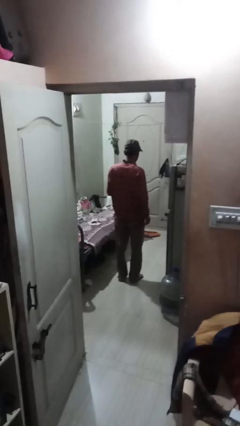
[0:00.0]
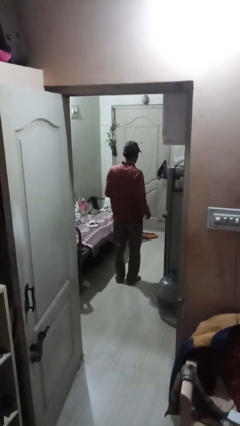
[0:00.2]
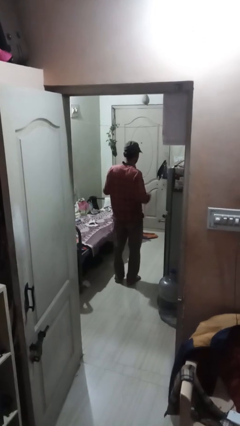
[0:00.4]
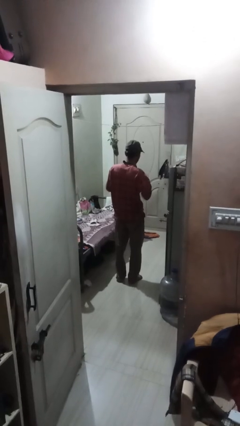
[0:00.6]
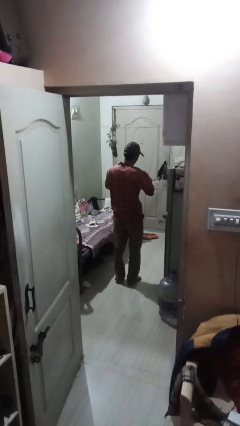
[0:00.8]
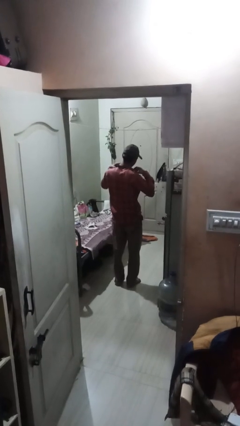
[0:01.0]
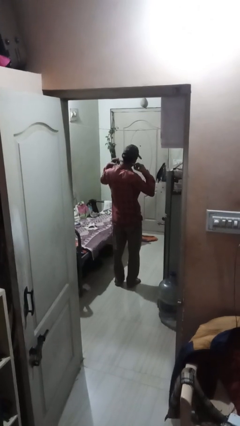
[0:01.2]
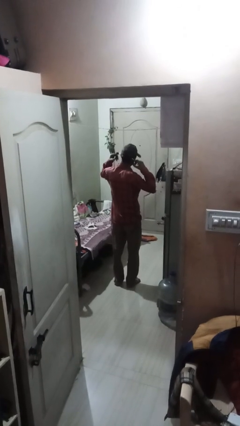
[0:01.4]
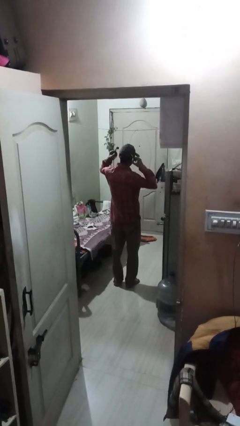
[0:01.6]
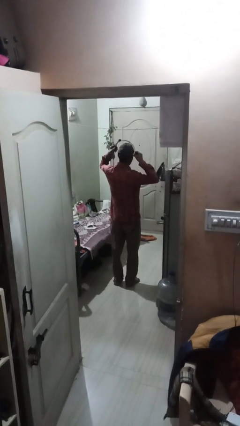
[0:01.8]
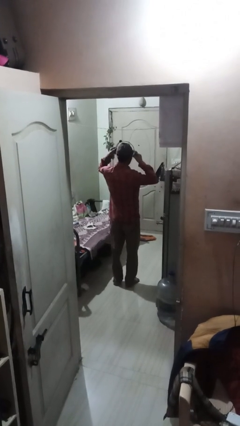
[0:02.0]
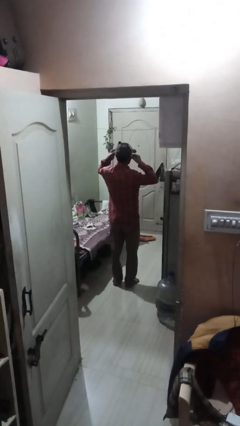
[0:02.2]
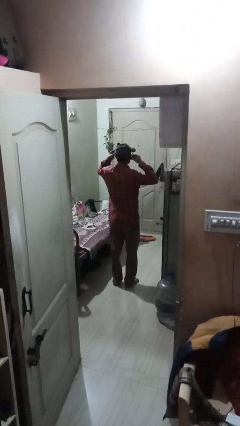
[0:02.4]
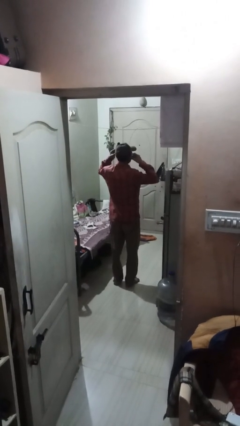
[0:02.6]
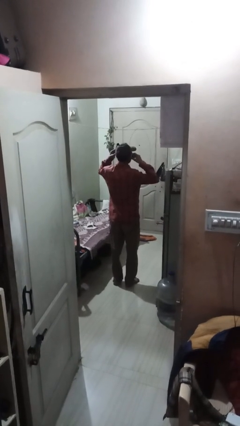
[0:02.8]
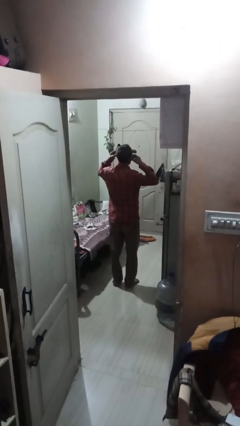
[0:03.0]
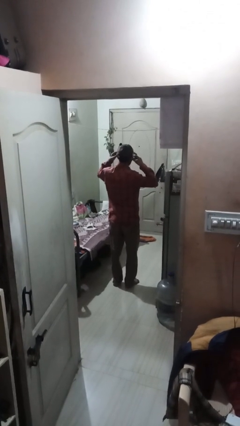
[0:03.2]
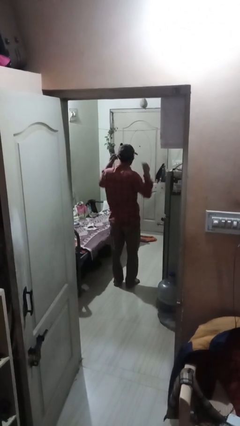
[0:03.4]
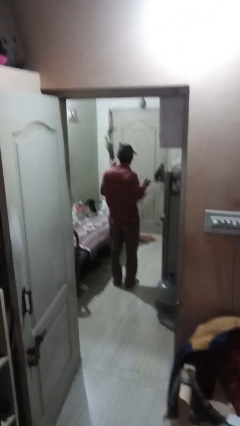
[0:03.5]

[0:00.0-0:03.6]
person puts on headphones

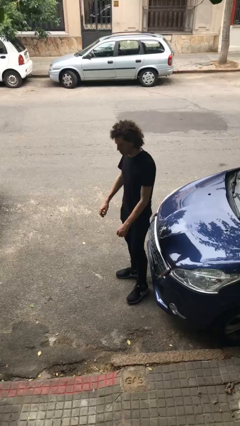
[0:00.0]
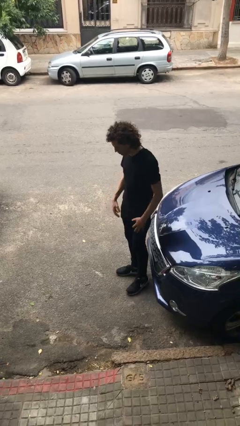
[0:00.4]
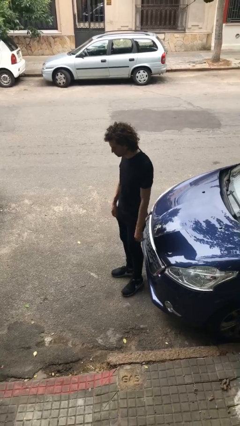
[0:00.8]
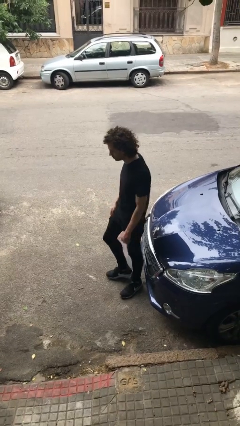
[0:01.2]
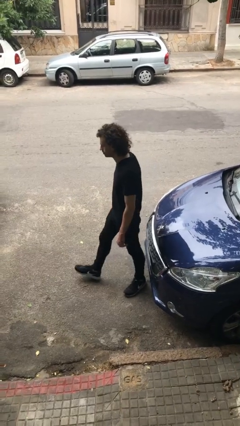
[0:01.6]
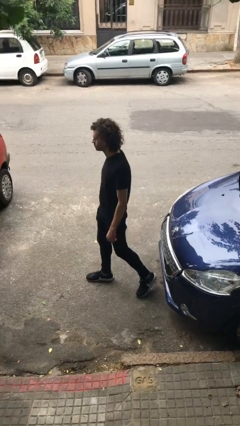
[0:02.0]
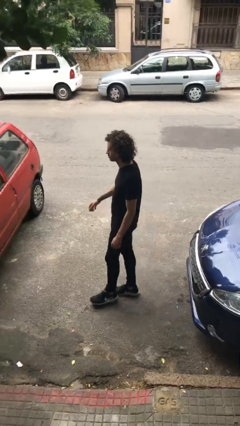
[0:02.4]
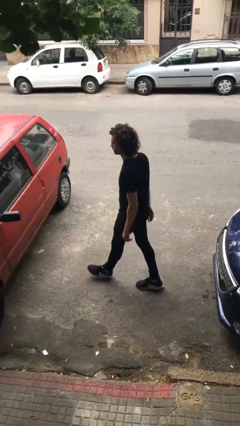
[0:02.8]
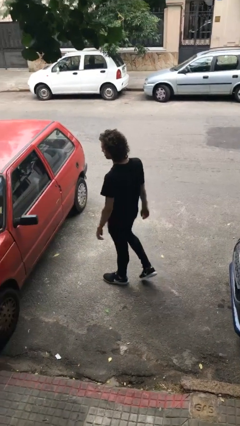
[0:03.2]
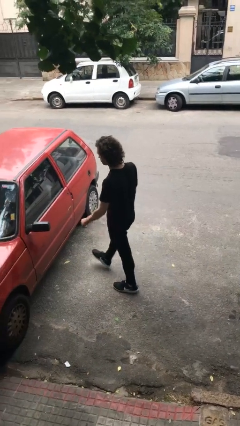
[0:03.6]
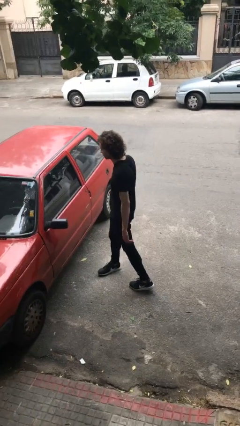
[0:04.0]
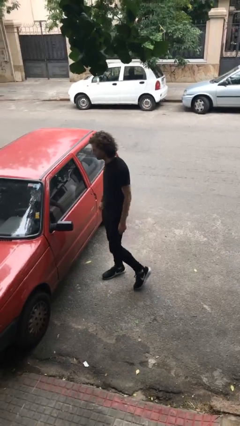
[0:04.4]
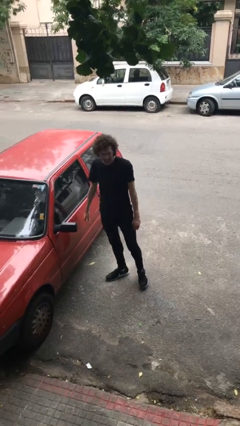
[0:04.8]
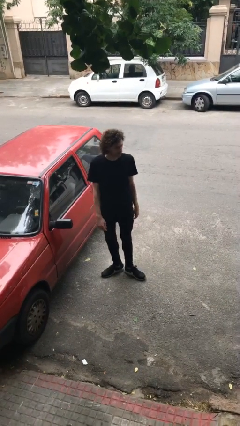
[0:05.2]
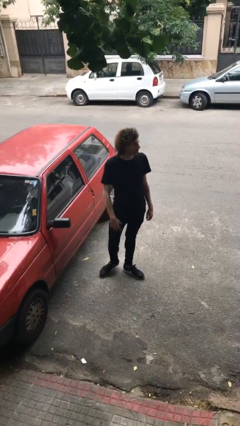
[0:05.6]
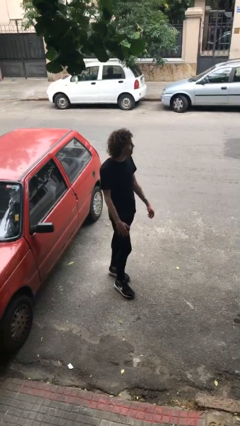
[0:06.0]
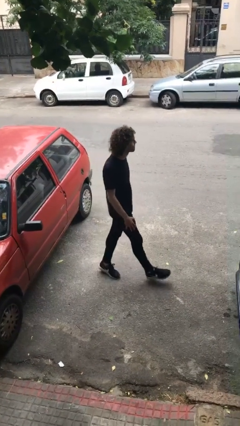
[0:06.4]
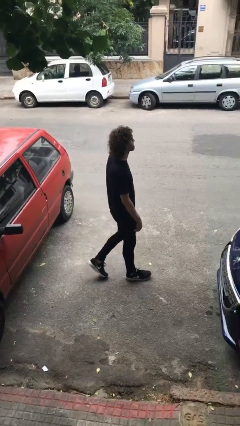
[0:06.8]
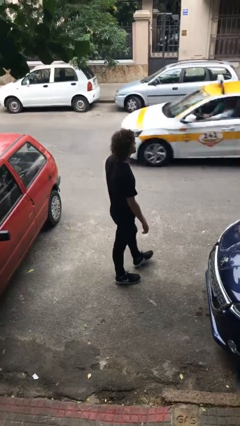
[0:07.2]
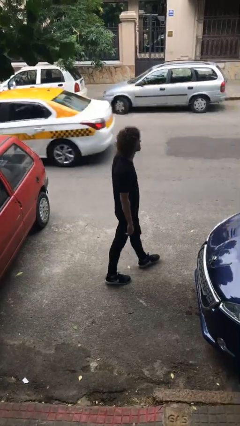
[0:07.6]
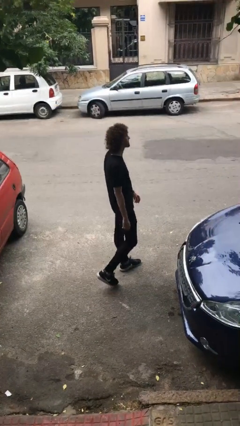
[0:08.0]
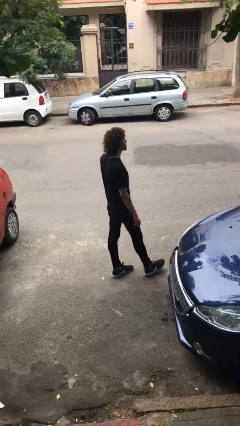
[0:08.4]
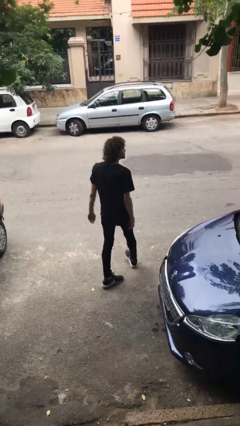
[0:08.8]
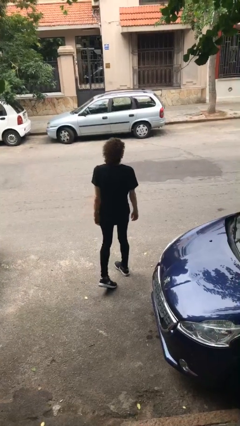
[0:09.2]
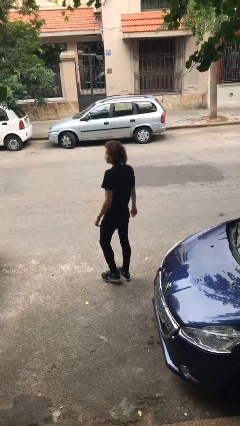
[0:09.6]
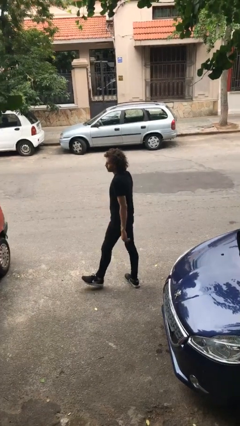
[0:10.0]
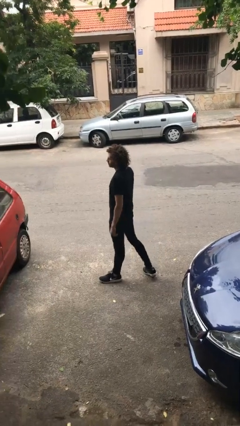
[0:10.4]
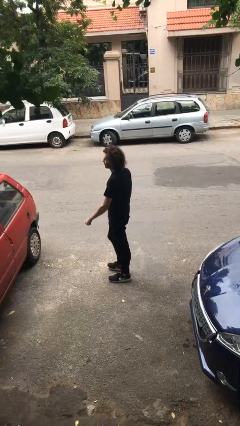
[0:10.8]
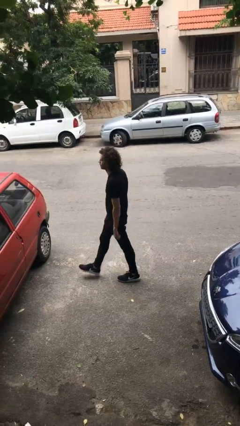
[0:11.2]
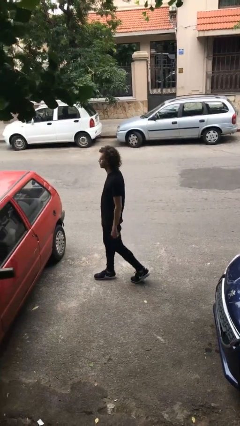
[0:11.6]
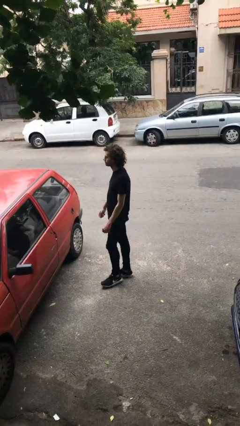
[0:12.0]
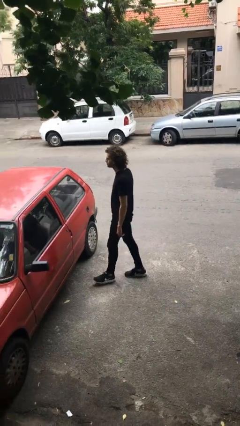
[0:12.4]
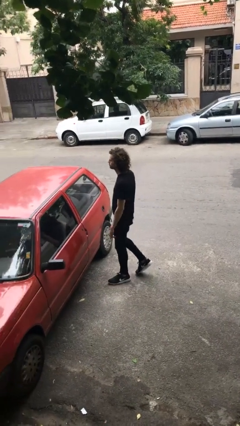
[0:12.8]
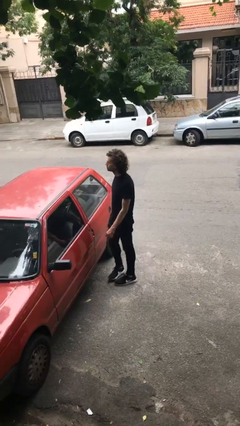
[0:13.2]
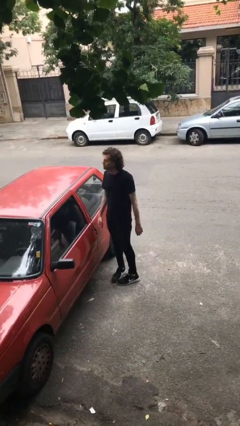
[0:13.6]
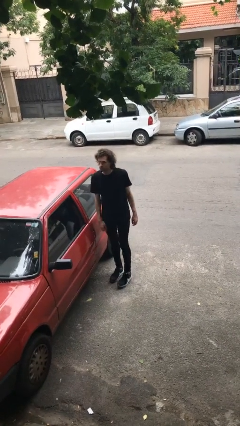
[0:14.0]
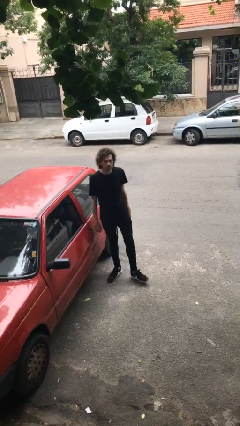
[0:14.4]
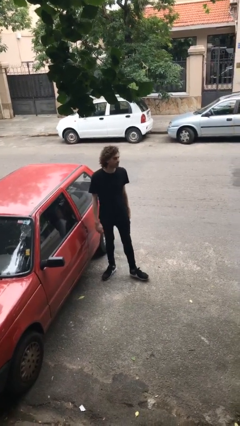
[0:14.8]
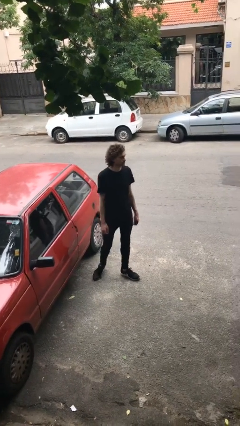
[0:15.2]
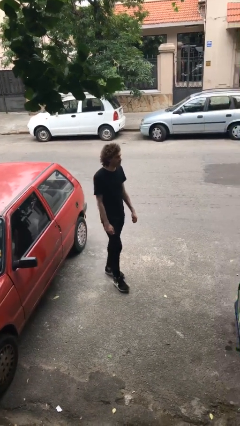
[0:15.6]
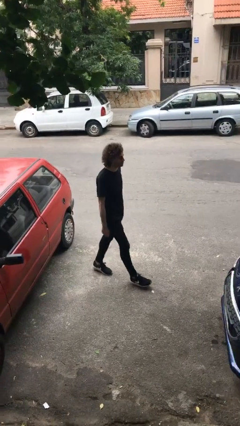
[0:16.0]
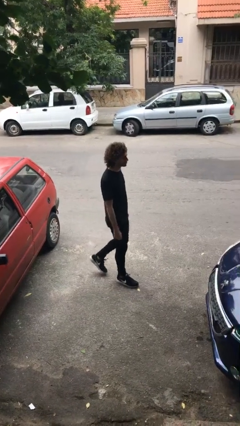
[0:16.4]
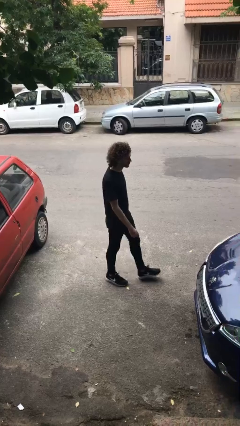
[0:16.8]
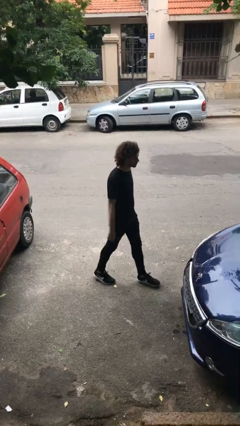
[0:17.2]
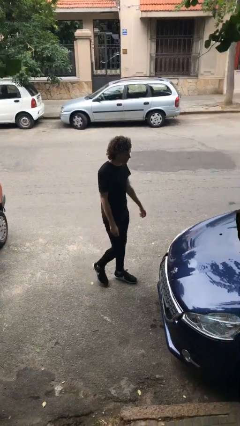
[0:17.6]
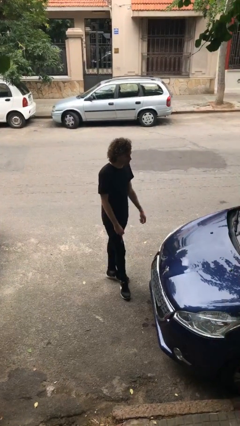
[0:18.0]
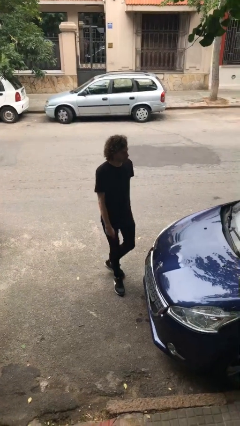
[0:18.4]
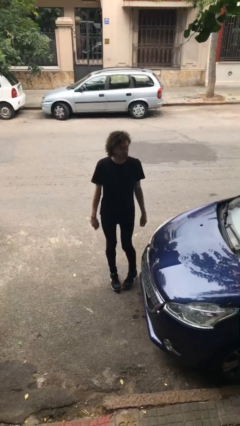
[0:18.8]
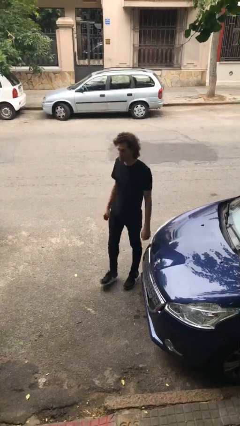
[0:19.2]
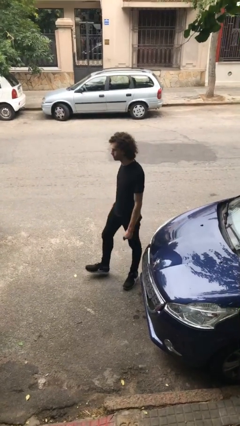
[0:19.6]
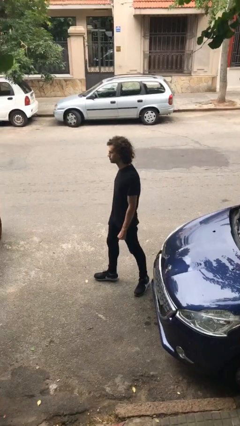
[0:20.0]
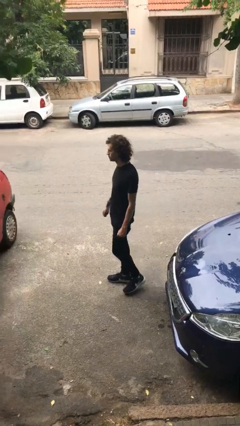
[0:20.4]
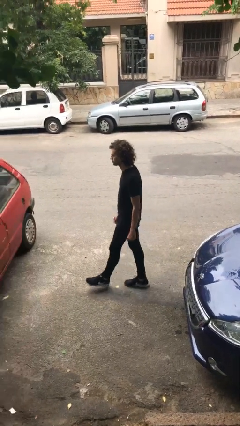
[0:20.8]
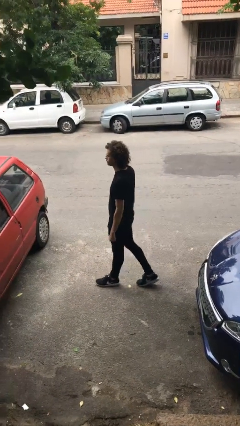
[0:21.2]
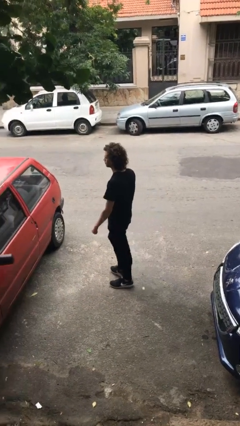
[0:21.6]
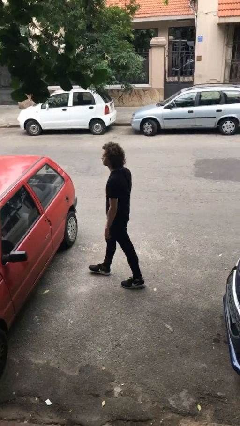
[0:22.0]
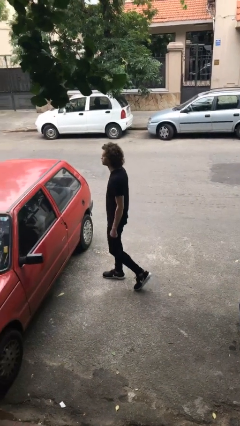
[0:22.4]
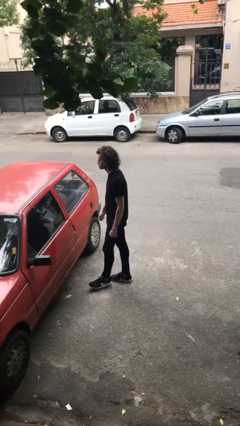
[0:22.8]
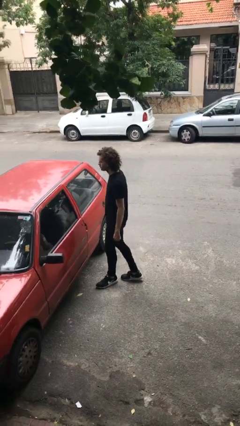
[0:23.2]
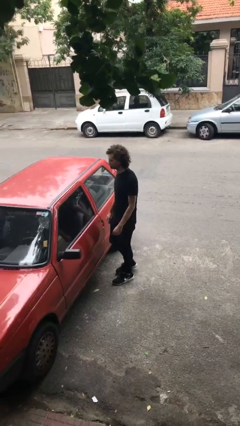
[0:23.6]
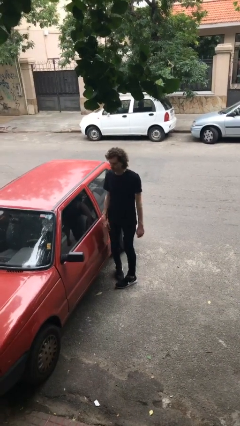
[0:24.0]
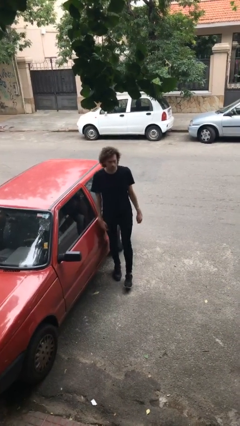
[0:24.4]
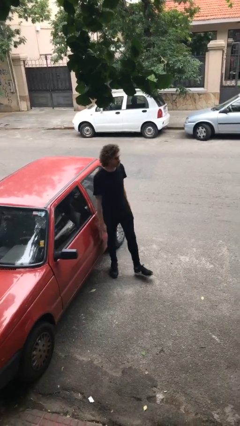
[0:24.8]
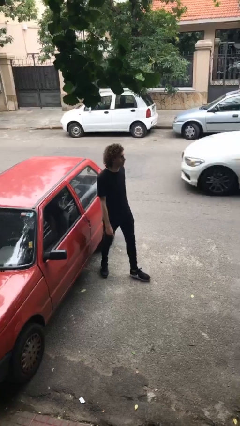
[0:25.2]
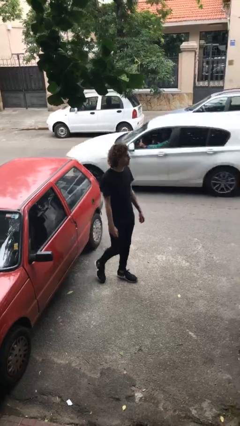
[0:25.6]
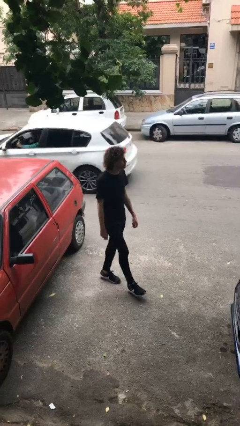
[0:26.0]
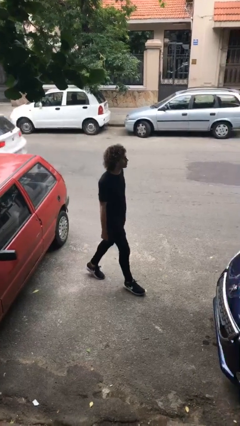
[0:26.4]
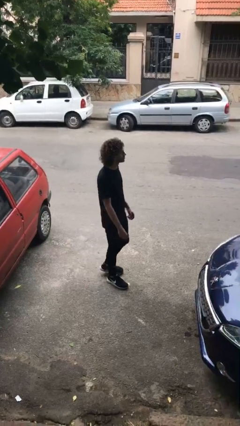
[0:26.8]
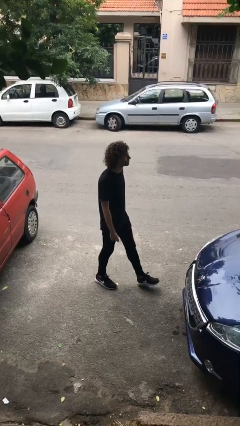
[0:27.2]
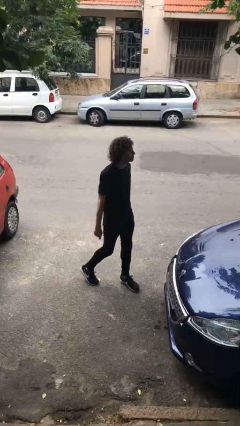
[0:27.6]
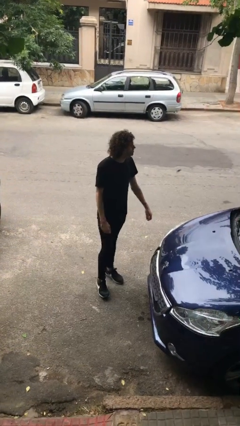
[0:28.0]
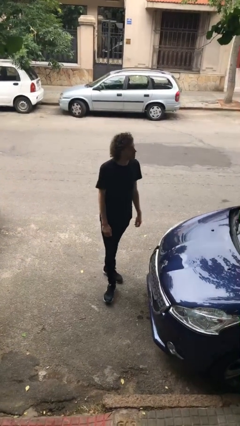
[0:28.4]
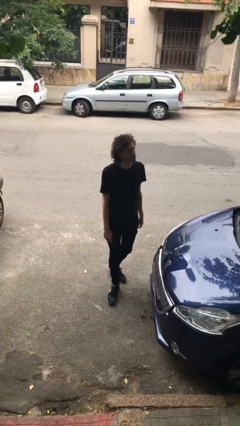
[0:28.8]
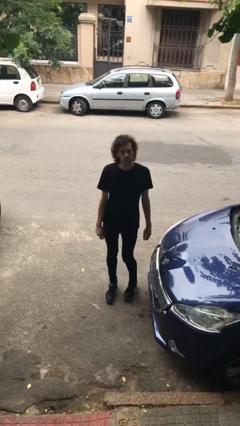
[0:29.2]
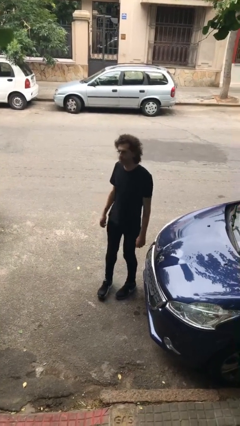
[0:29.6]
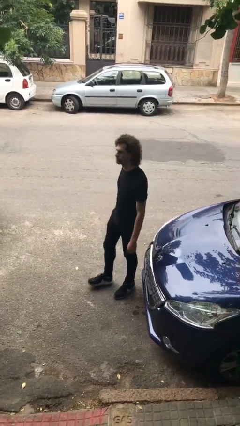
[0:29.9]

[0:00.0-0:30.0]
person walks
